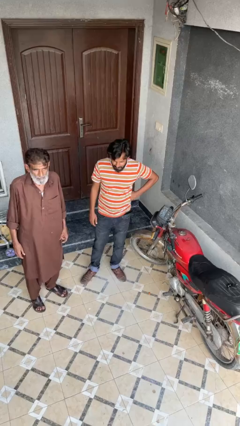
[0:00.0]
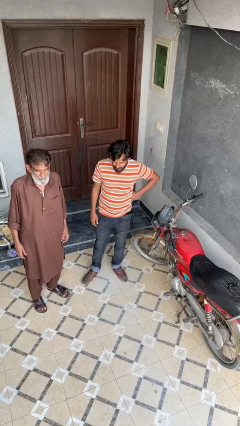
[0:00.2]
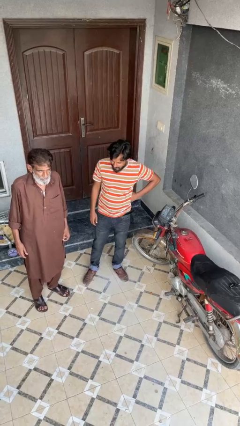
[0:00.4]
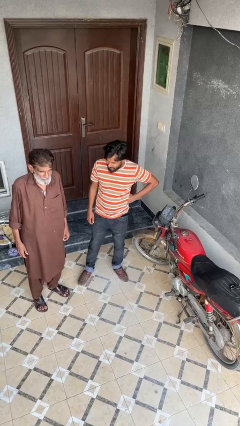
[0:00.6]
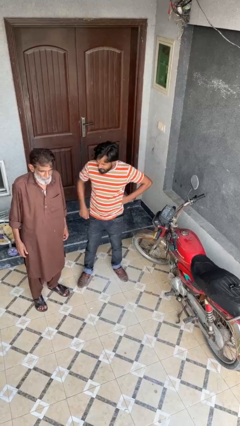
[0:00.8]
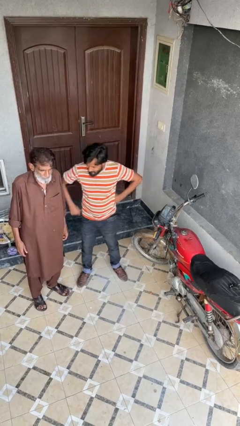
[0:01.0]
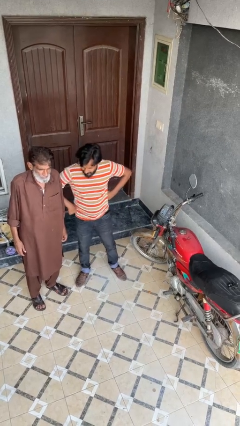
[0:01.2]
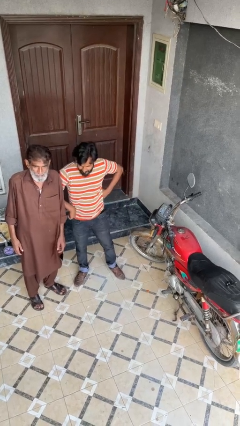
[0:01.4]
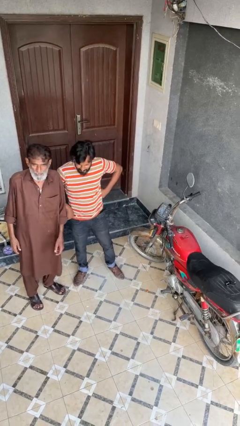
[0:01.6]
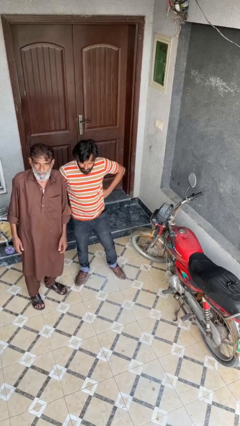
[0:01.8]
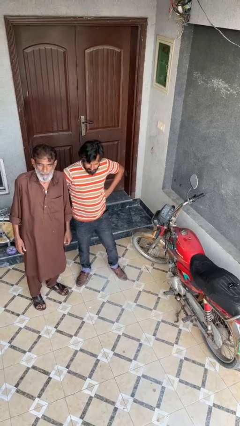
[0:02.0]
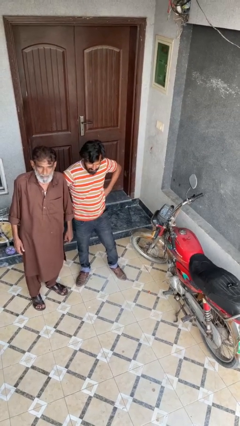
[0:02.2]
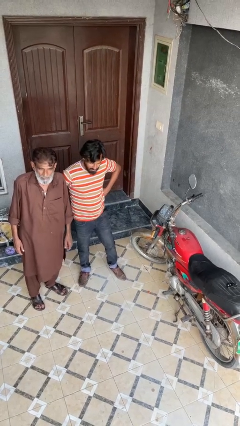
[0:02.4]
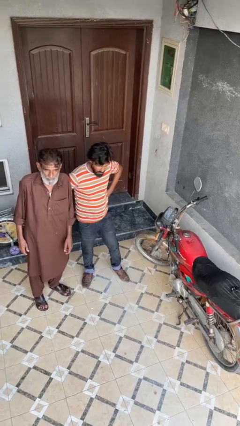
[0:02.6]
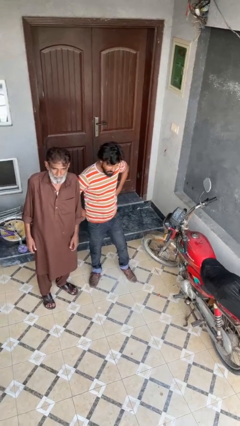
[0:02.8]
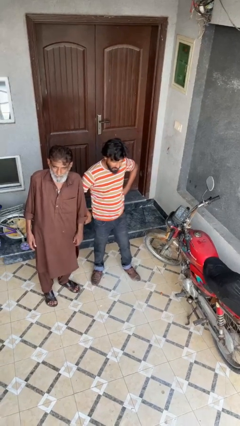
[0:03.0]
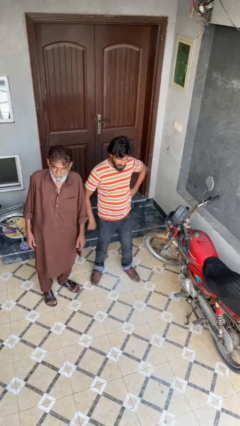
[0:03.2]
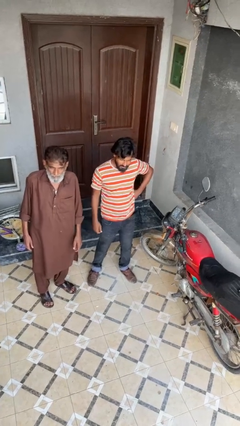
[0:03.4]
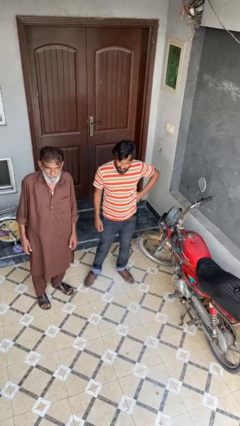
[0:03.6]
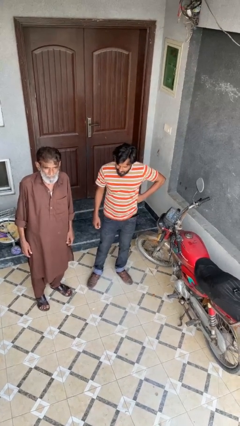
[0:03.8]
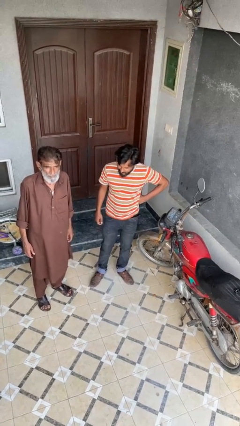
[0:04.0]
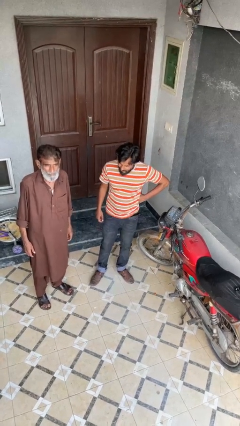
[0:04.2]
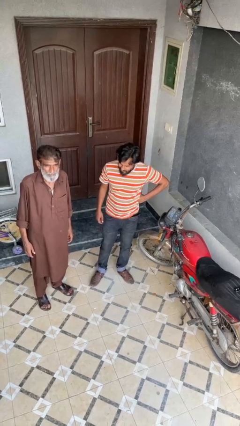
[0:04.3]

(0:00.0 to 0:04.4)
person nudges person with elbow

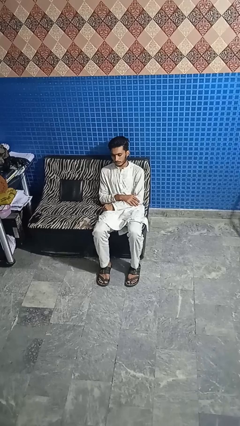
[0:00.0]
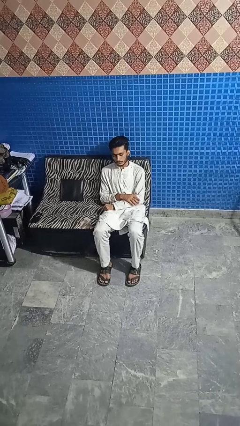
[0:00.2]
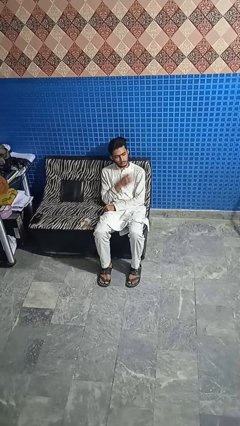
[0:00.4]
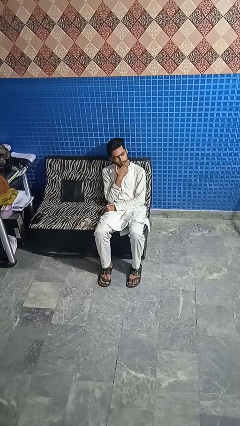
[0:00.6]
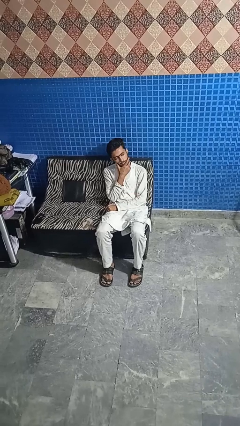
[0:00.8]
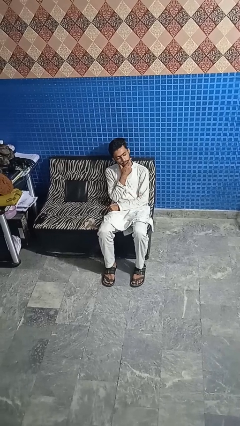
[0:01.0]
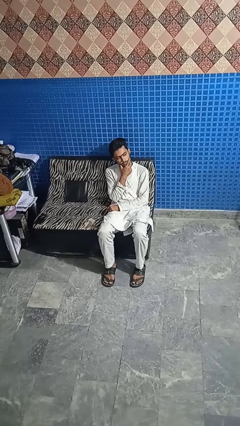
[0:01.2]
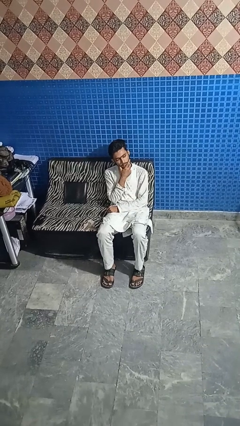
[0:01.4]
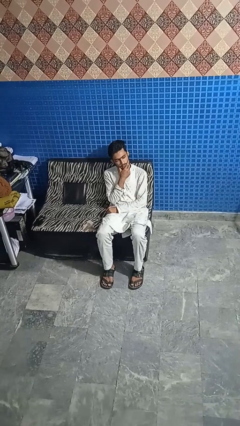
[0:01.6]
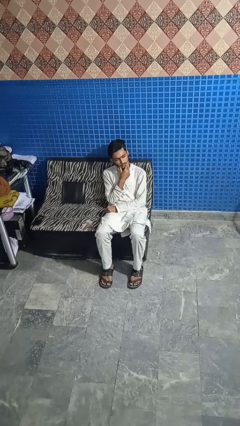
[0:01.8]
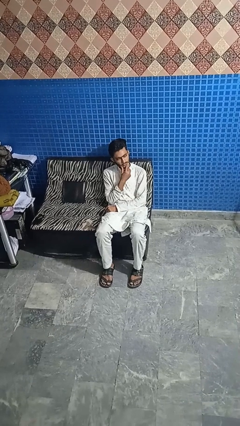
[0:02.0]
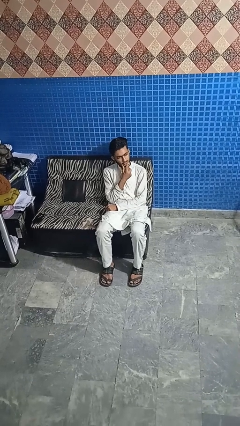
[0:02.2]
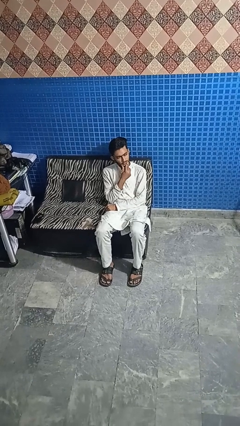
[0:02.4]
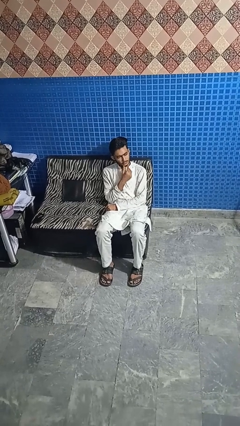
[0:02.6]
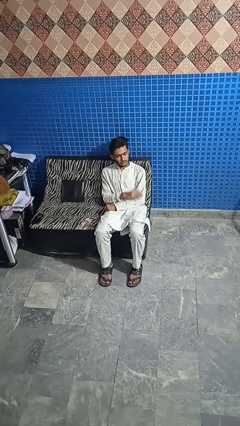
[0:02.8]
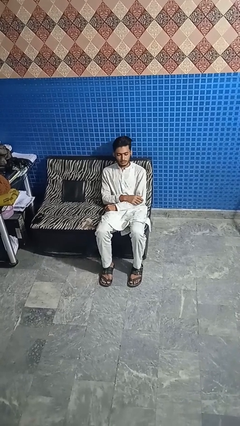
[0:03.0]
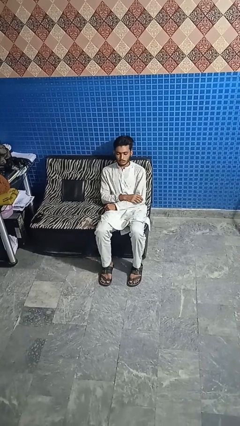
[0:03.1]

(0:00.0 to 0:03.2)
person strokes chin

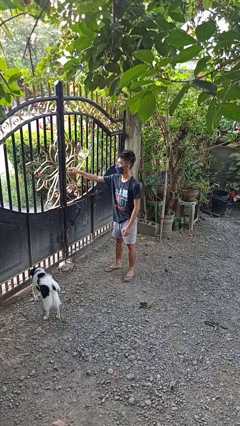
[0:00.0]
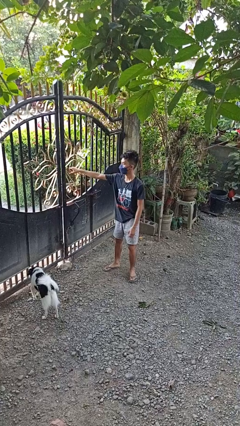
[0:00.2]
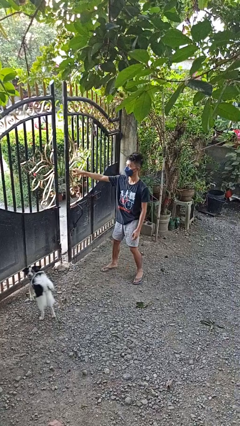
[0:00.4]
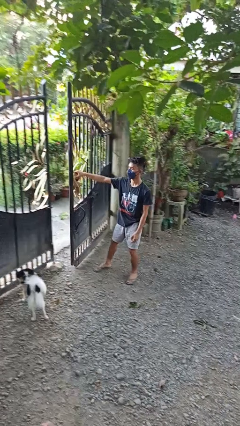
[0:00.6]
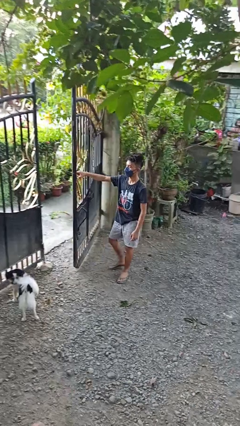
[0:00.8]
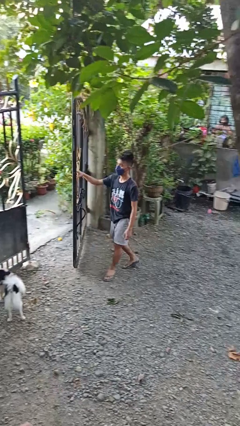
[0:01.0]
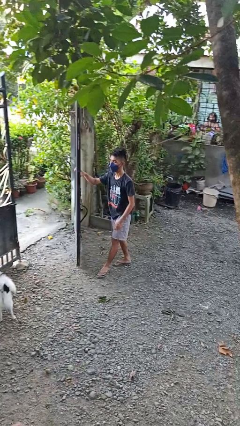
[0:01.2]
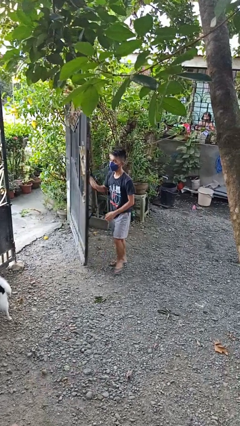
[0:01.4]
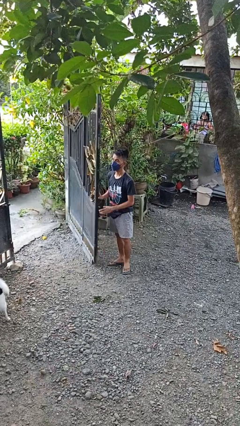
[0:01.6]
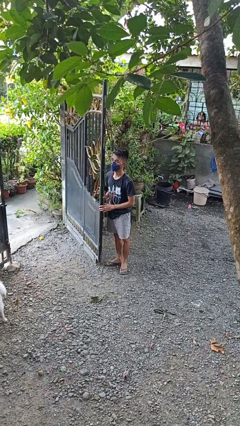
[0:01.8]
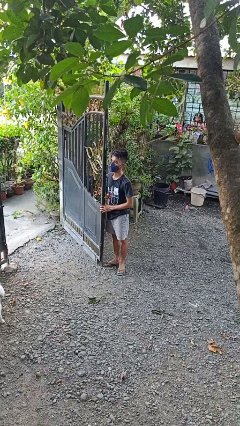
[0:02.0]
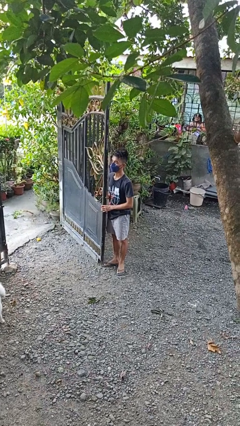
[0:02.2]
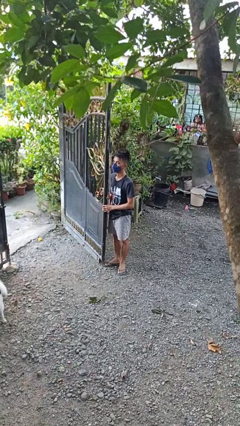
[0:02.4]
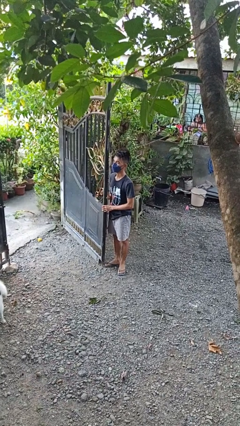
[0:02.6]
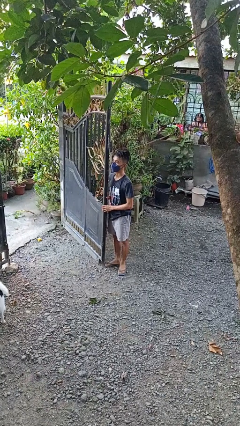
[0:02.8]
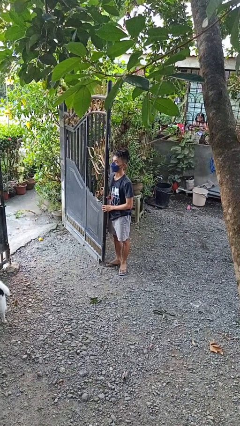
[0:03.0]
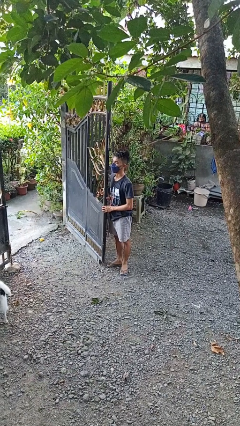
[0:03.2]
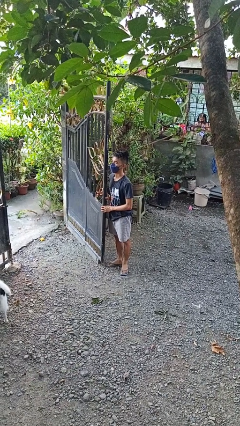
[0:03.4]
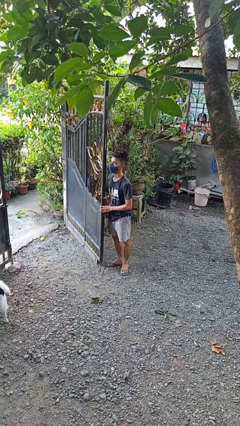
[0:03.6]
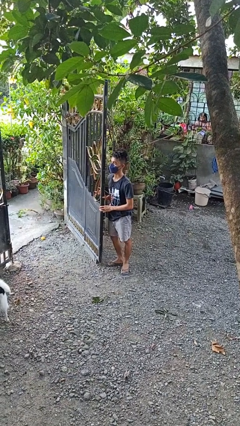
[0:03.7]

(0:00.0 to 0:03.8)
person opens gate

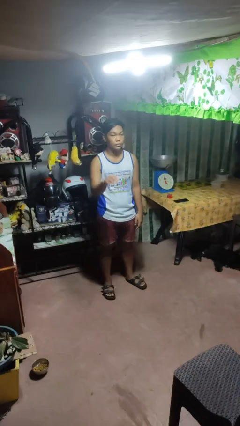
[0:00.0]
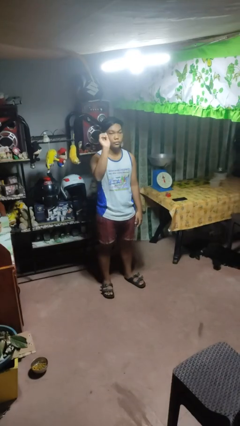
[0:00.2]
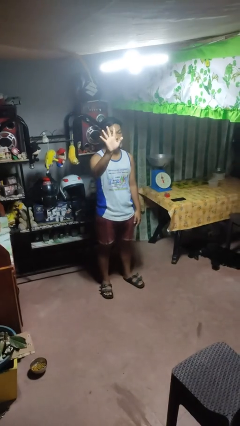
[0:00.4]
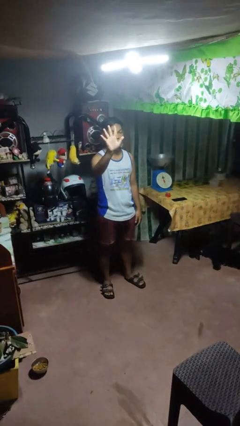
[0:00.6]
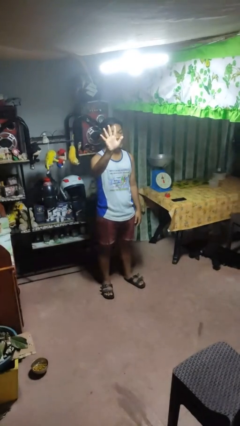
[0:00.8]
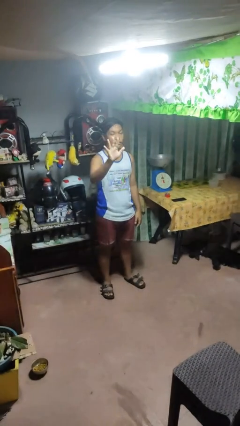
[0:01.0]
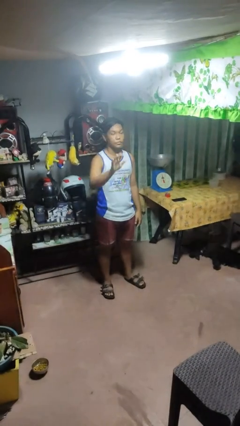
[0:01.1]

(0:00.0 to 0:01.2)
person gestures number five

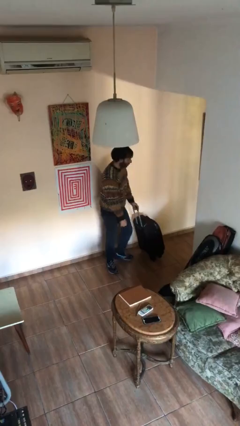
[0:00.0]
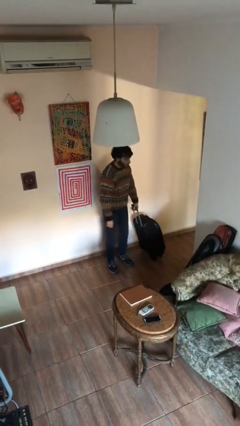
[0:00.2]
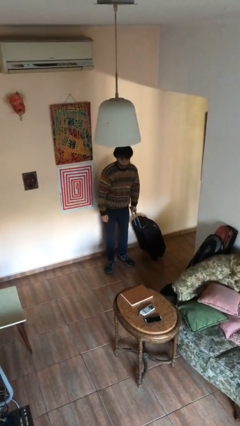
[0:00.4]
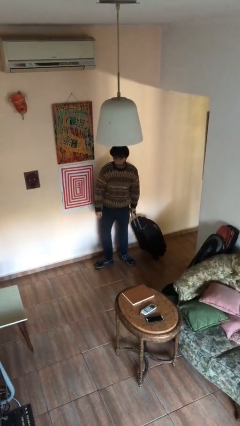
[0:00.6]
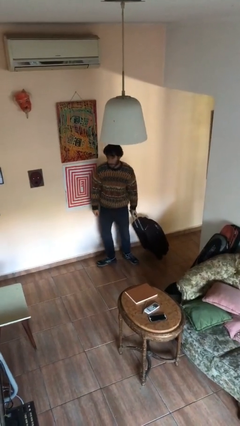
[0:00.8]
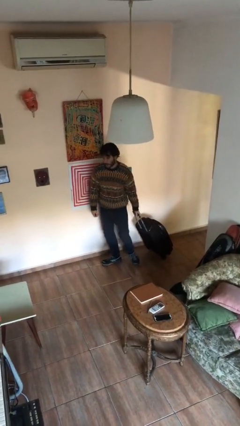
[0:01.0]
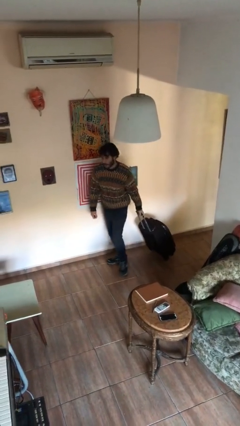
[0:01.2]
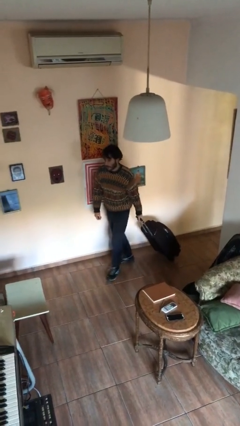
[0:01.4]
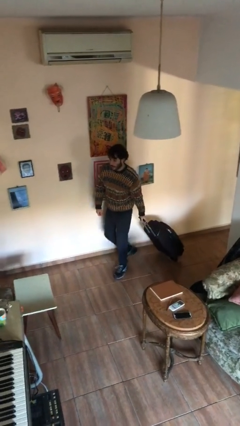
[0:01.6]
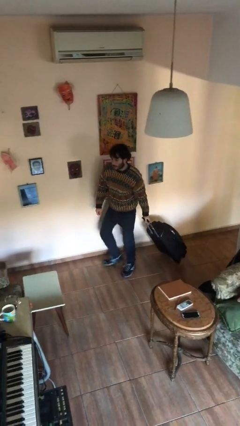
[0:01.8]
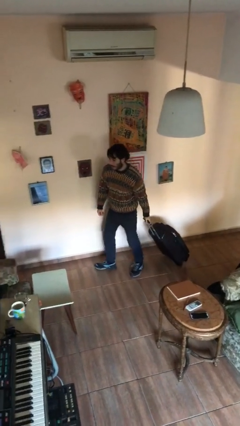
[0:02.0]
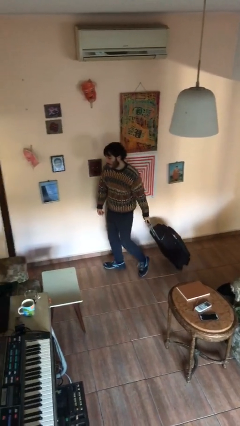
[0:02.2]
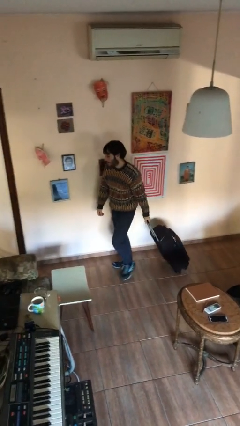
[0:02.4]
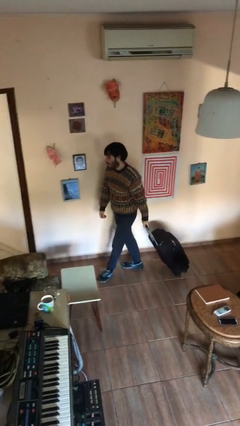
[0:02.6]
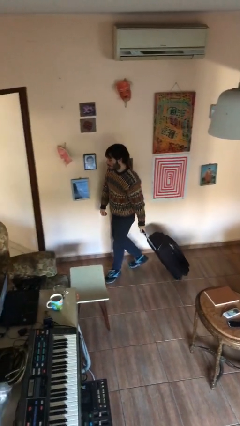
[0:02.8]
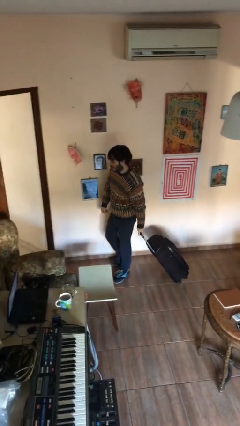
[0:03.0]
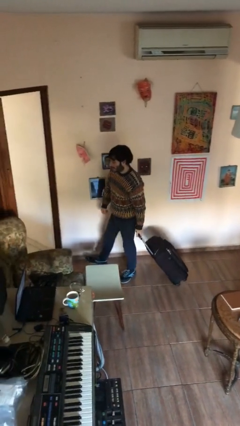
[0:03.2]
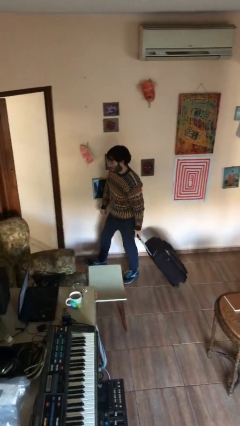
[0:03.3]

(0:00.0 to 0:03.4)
person pulls wheeled cart

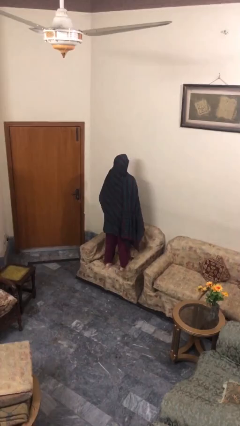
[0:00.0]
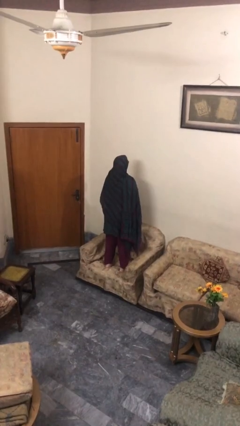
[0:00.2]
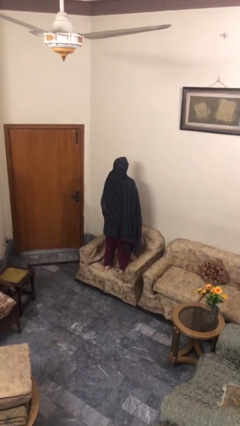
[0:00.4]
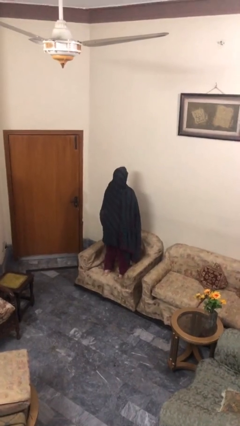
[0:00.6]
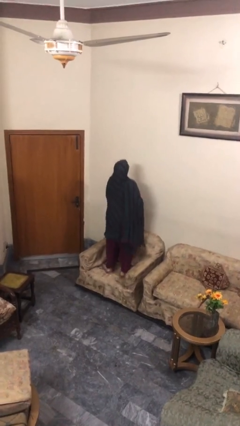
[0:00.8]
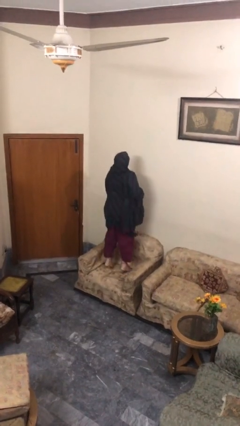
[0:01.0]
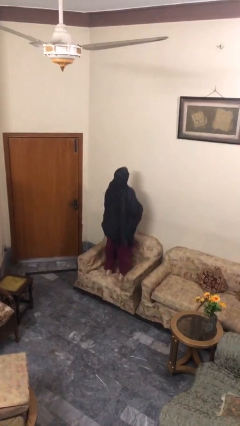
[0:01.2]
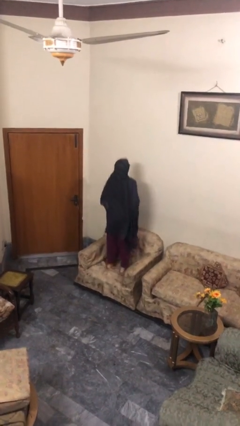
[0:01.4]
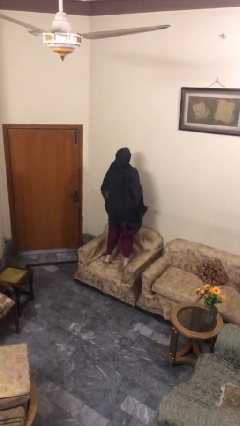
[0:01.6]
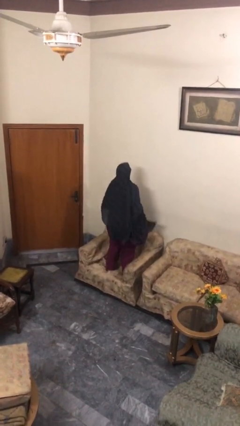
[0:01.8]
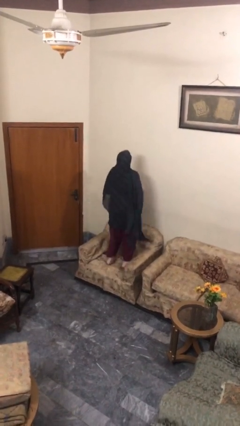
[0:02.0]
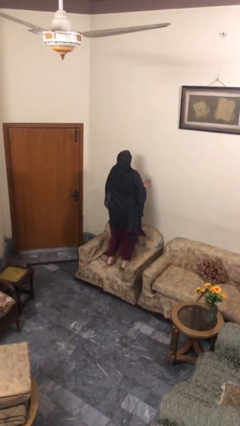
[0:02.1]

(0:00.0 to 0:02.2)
person jumps on couch
